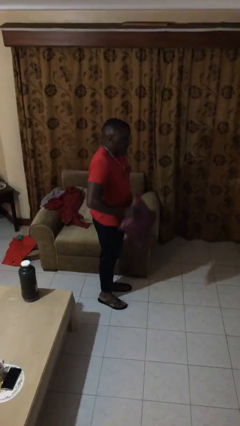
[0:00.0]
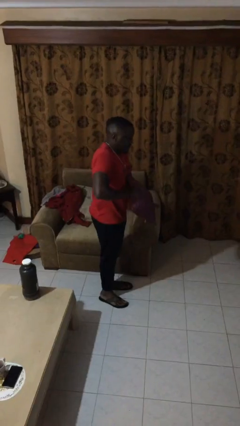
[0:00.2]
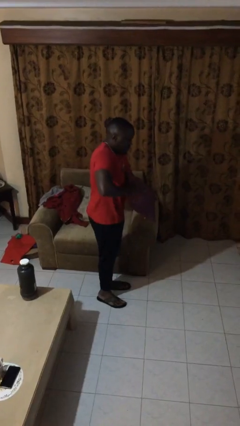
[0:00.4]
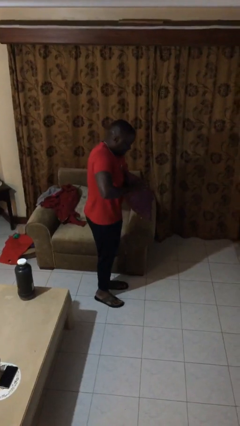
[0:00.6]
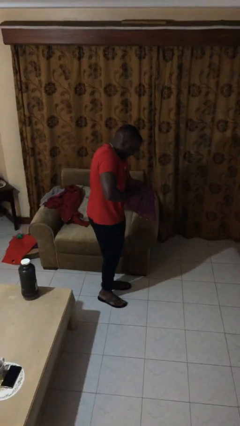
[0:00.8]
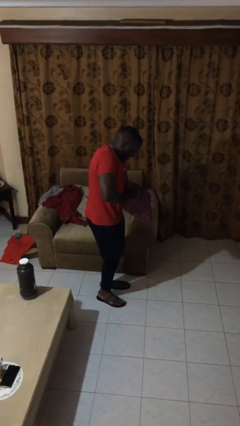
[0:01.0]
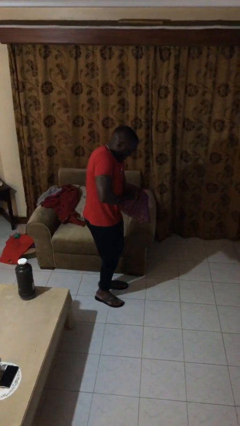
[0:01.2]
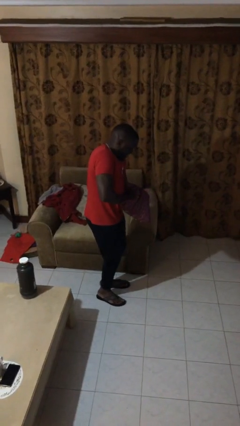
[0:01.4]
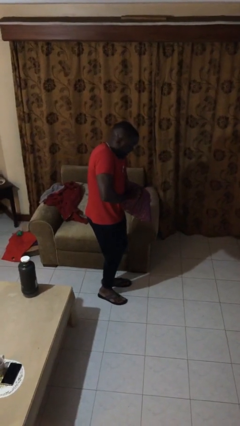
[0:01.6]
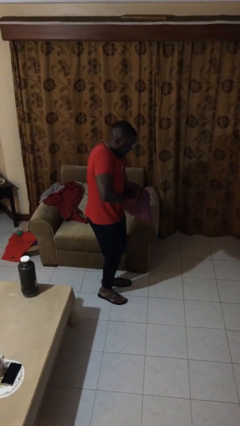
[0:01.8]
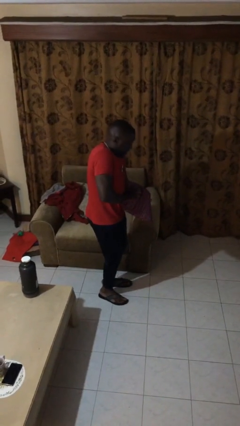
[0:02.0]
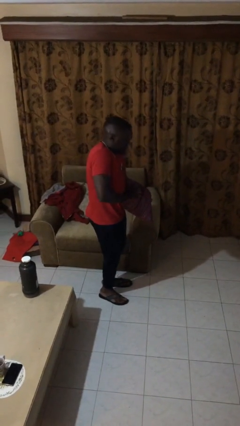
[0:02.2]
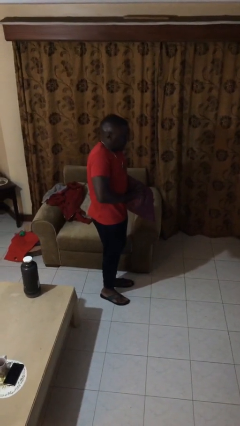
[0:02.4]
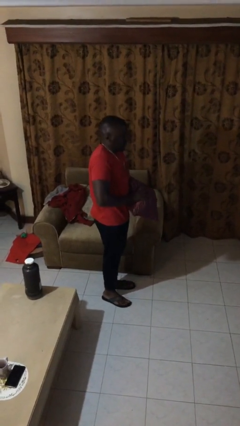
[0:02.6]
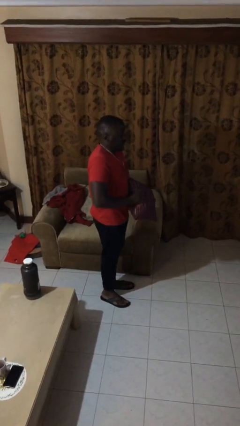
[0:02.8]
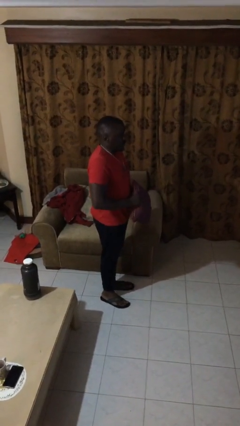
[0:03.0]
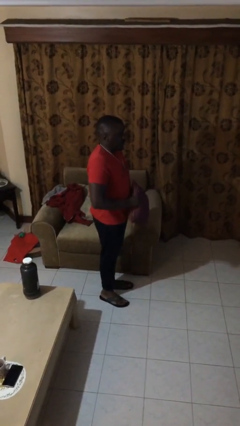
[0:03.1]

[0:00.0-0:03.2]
person squeezes object

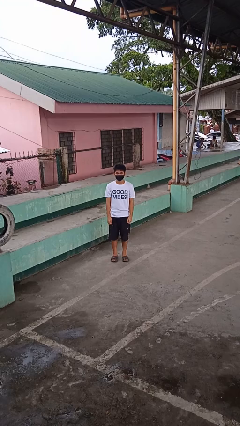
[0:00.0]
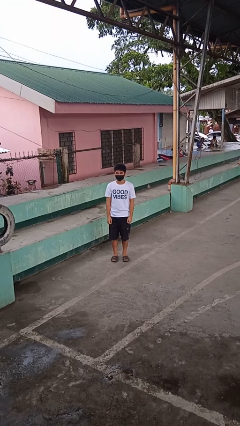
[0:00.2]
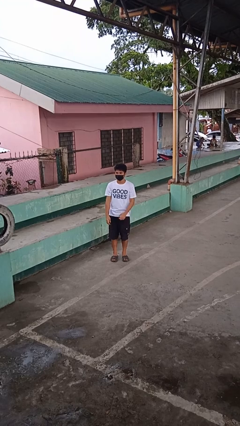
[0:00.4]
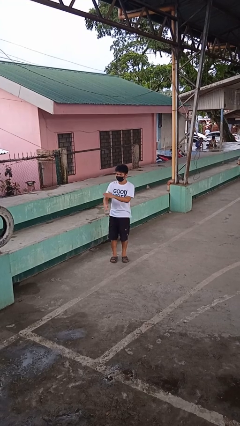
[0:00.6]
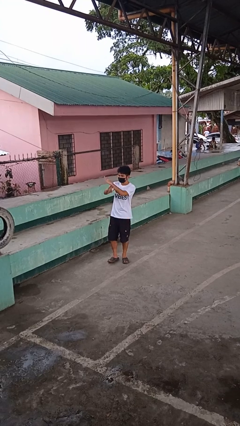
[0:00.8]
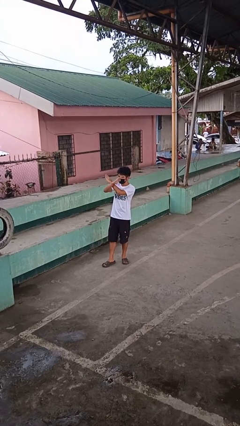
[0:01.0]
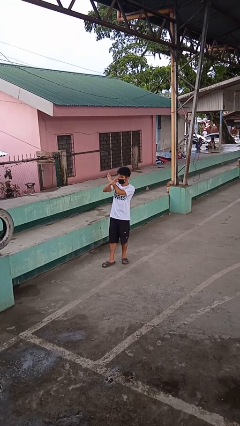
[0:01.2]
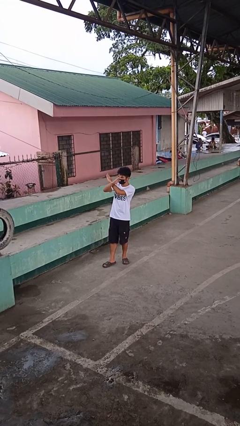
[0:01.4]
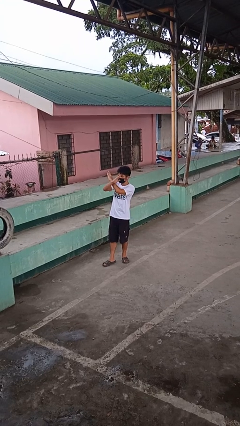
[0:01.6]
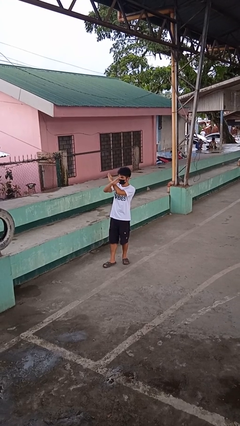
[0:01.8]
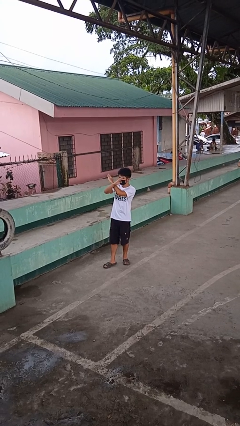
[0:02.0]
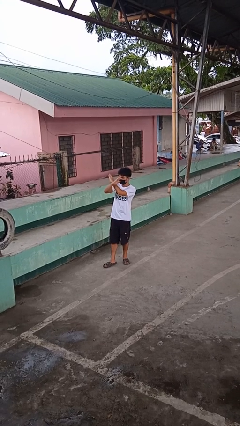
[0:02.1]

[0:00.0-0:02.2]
person gestures arms x

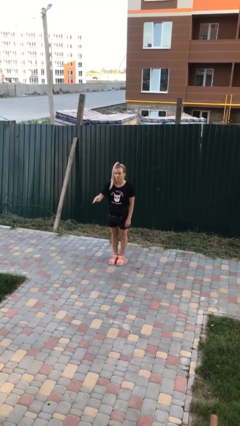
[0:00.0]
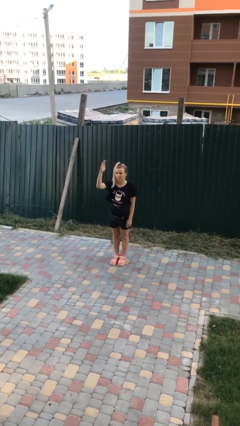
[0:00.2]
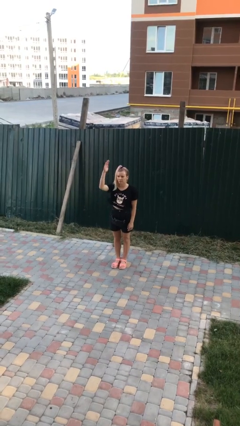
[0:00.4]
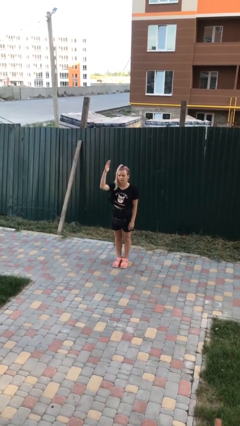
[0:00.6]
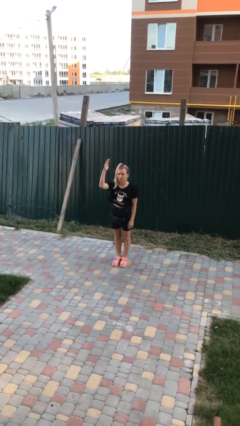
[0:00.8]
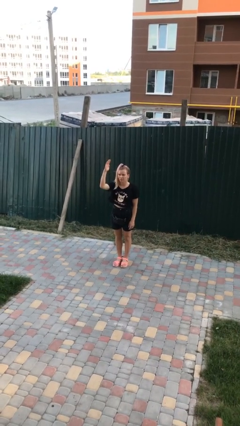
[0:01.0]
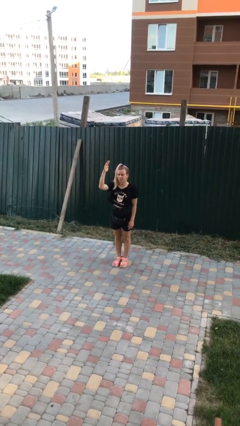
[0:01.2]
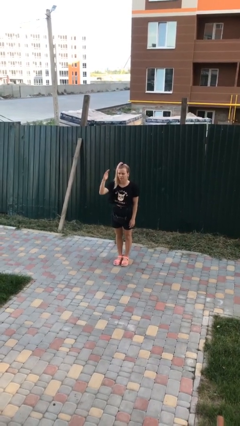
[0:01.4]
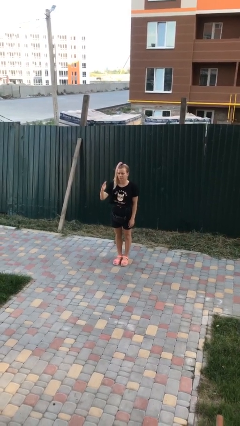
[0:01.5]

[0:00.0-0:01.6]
person gestures raise hand

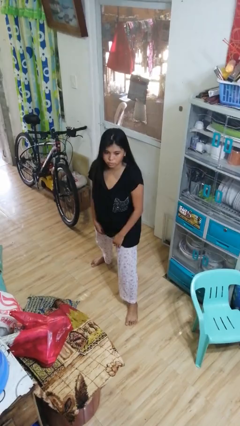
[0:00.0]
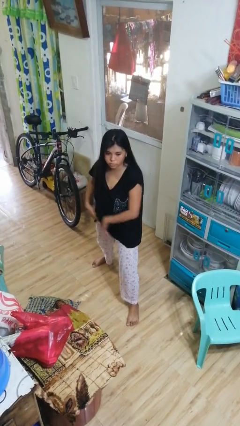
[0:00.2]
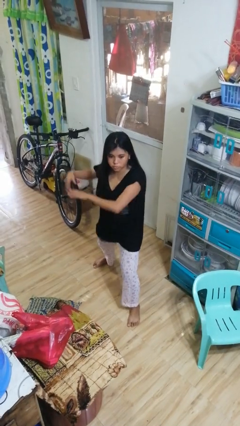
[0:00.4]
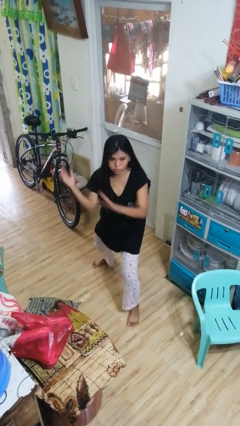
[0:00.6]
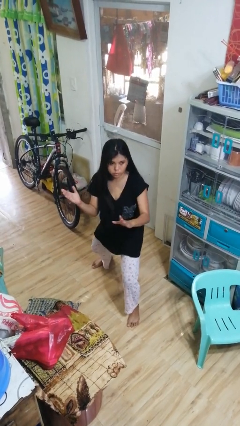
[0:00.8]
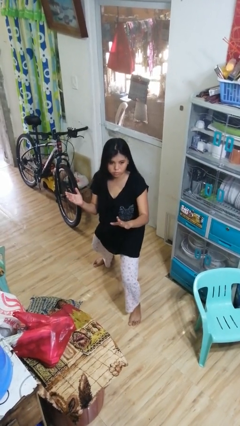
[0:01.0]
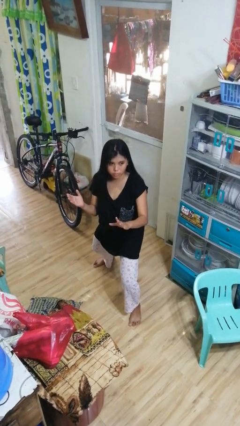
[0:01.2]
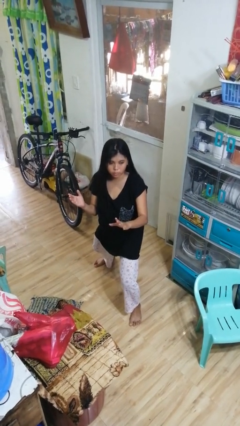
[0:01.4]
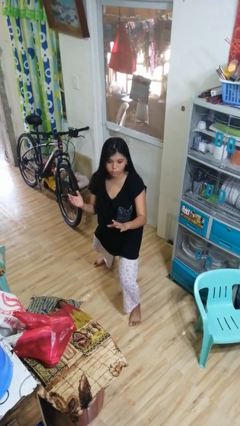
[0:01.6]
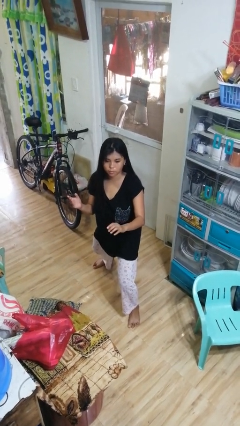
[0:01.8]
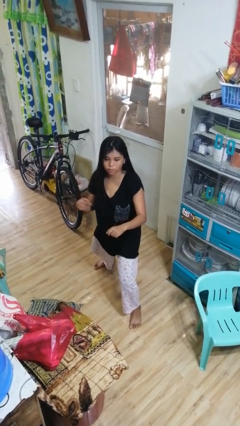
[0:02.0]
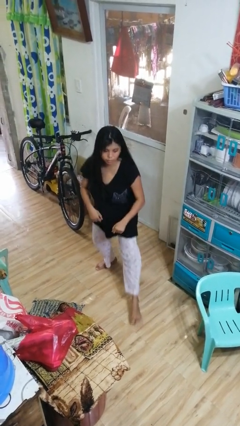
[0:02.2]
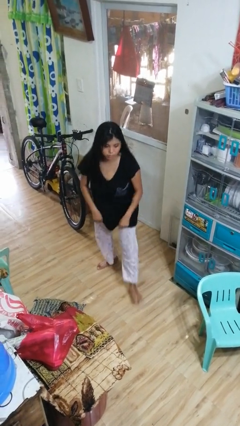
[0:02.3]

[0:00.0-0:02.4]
person karate chop

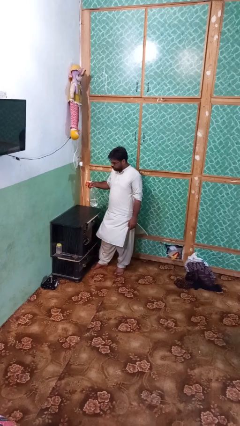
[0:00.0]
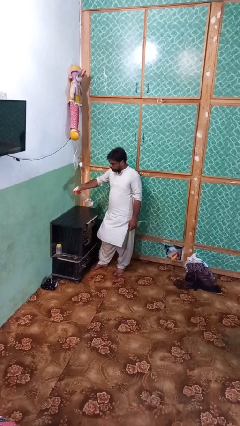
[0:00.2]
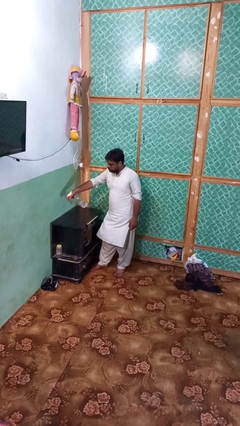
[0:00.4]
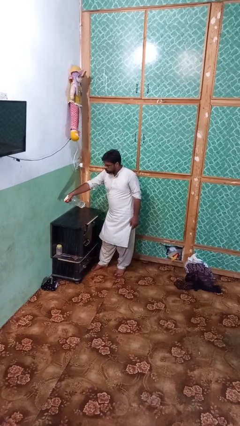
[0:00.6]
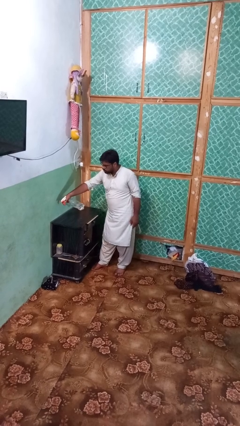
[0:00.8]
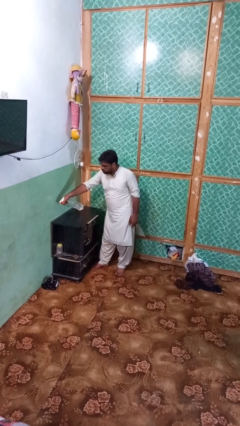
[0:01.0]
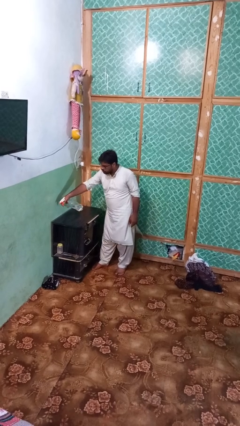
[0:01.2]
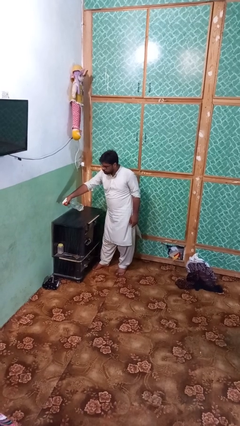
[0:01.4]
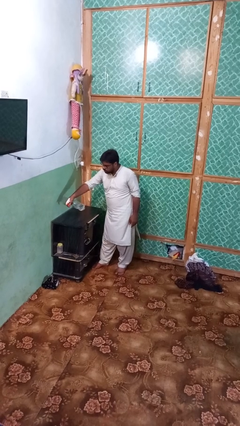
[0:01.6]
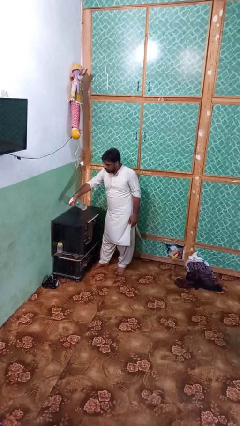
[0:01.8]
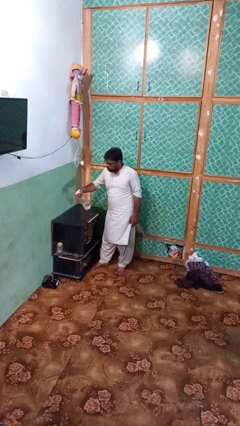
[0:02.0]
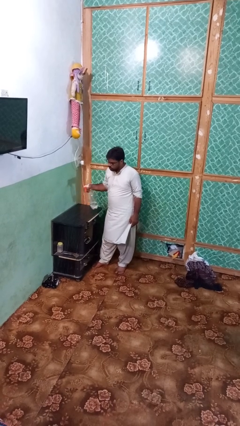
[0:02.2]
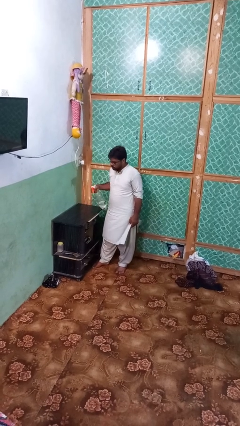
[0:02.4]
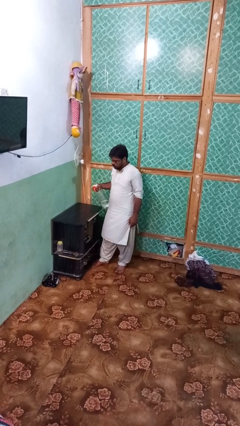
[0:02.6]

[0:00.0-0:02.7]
person sprays from bottle

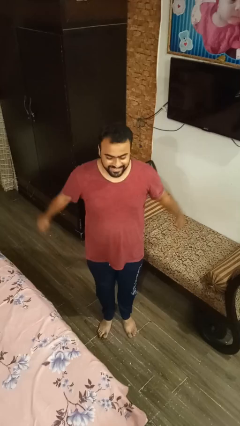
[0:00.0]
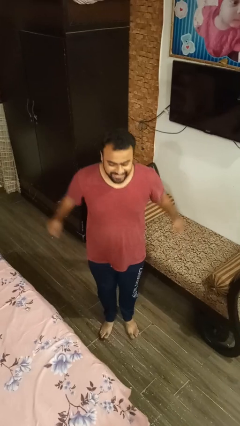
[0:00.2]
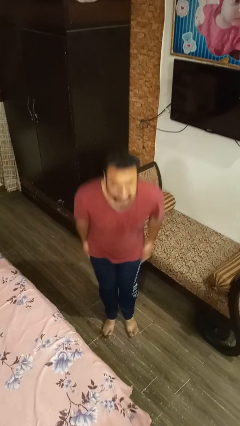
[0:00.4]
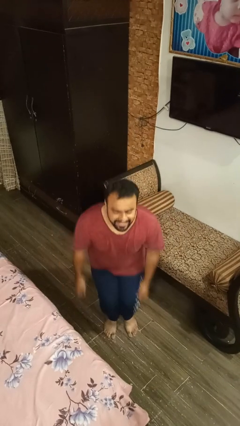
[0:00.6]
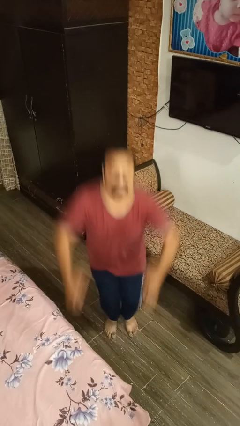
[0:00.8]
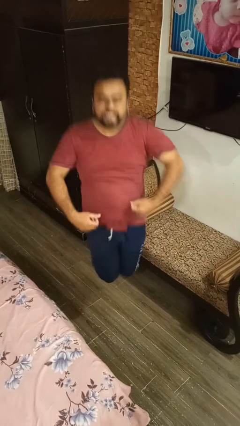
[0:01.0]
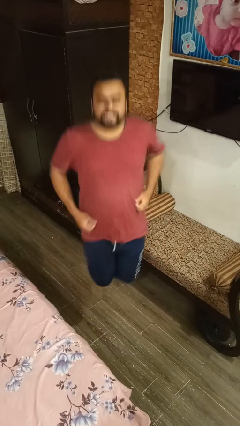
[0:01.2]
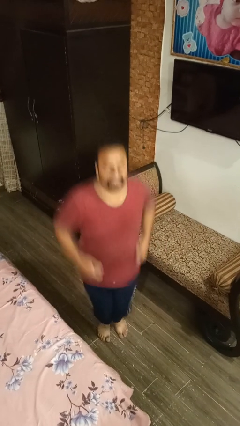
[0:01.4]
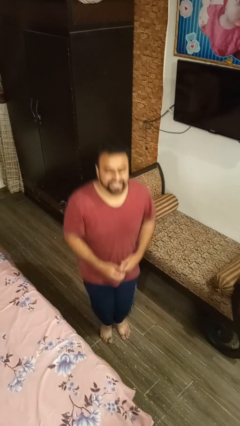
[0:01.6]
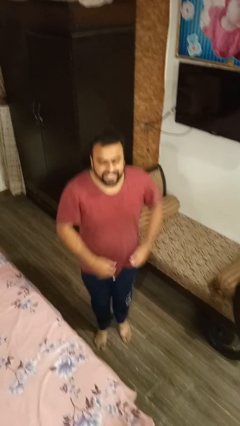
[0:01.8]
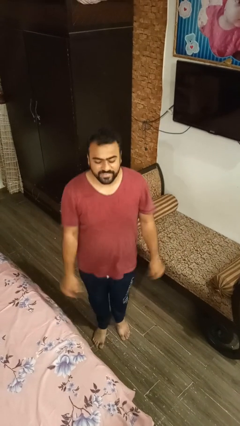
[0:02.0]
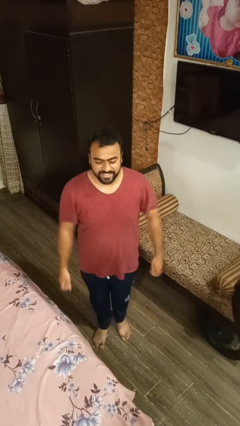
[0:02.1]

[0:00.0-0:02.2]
person jumps

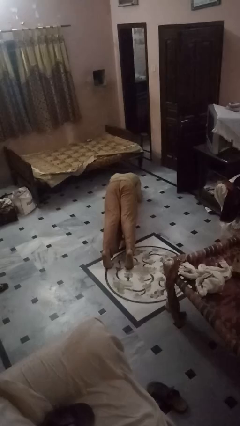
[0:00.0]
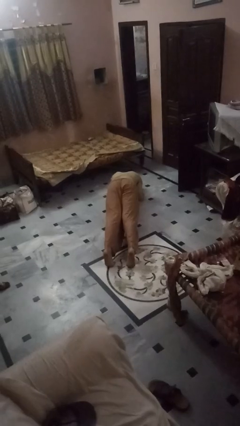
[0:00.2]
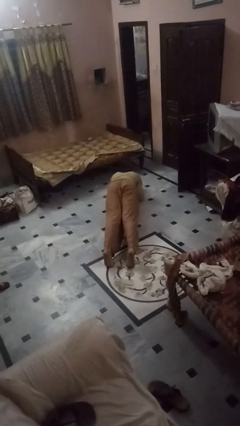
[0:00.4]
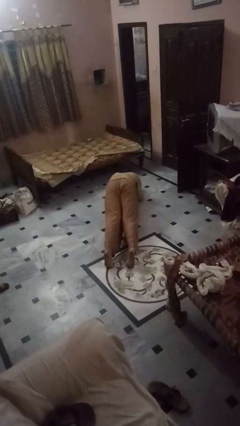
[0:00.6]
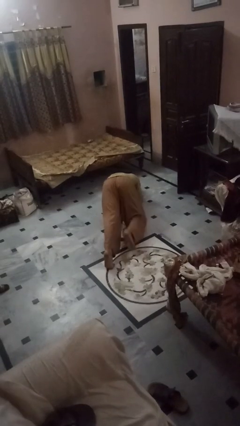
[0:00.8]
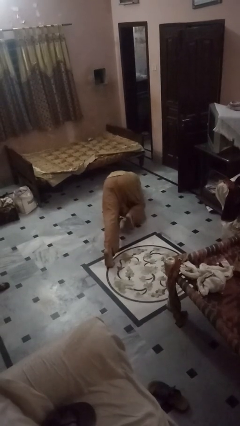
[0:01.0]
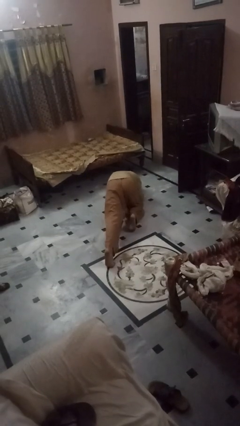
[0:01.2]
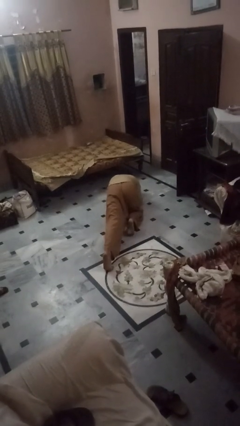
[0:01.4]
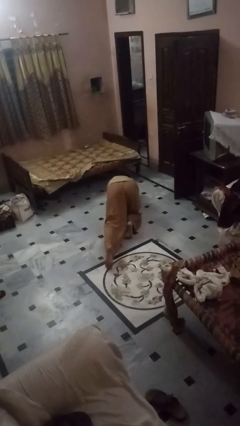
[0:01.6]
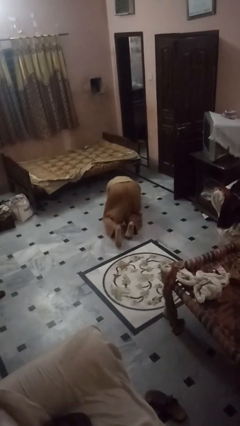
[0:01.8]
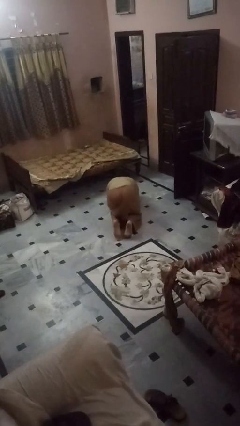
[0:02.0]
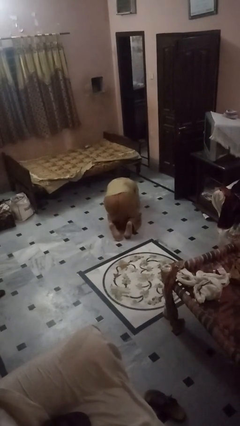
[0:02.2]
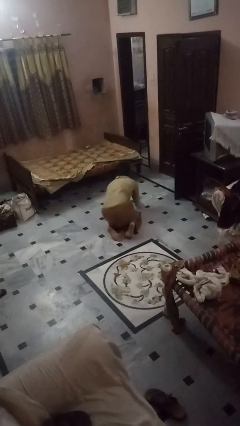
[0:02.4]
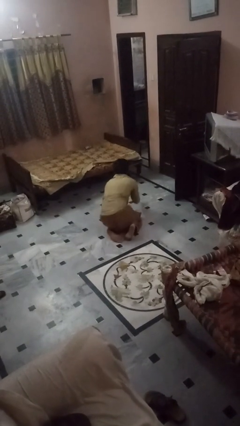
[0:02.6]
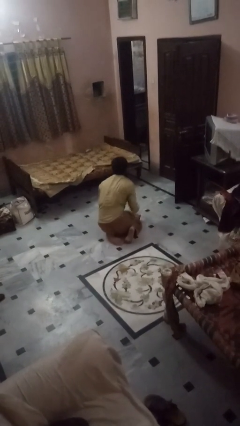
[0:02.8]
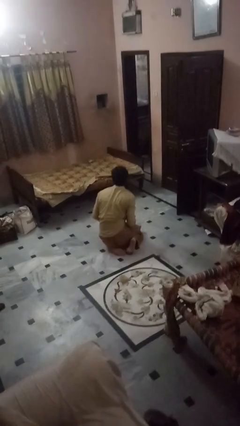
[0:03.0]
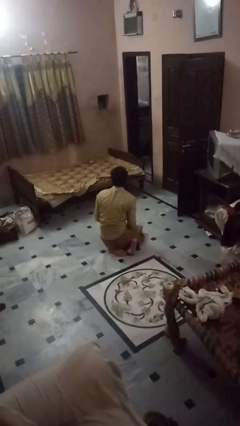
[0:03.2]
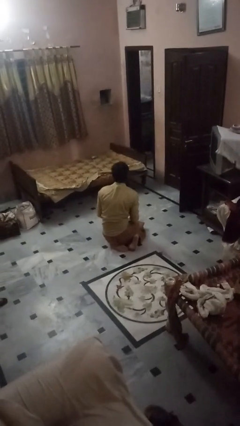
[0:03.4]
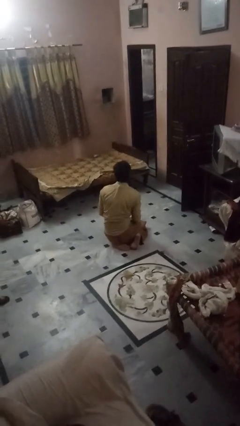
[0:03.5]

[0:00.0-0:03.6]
person stands up from floor
